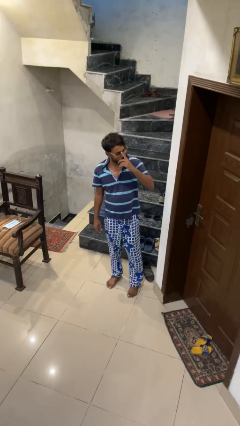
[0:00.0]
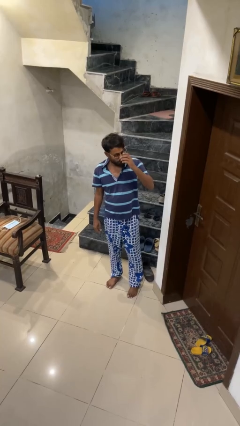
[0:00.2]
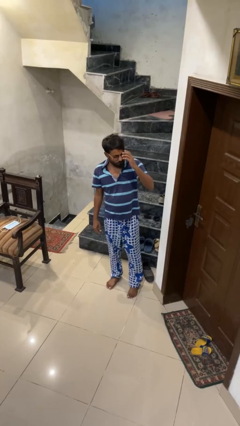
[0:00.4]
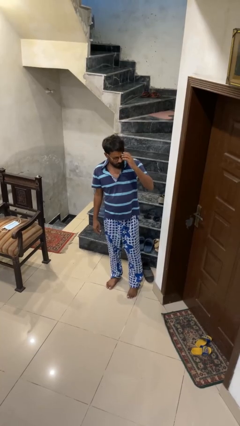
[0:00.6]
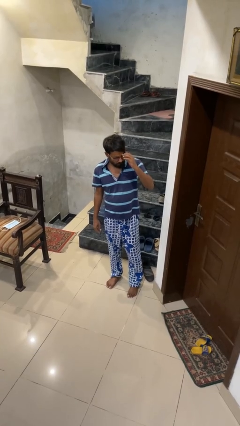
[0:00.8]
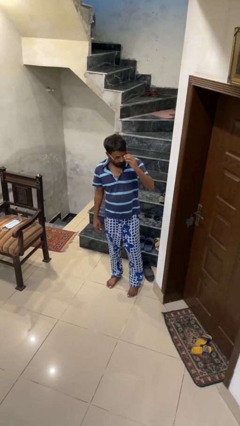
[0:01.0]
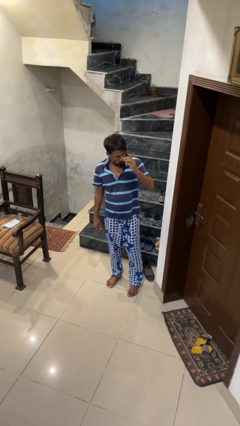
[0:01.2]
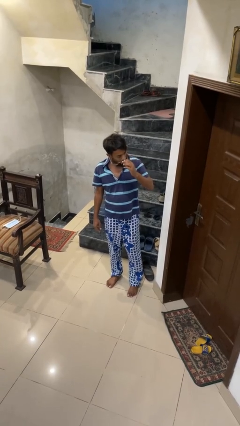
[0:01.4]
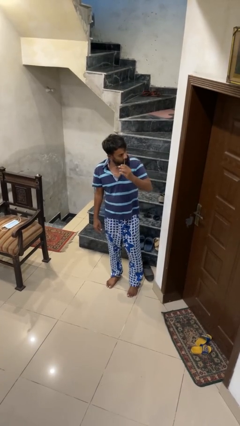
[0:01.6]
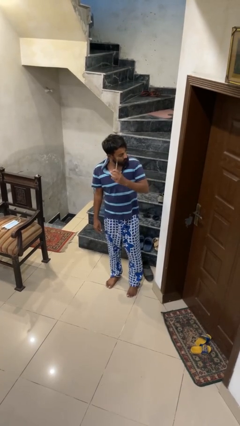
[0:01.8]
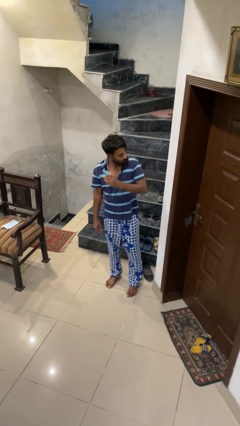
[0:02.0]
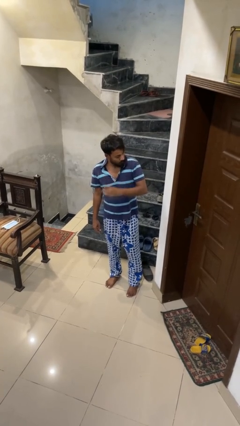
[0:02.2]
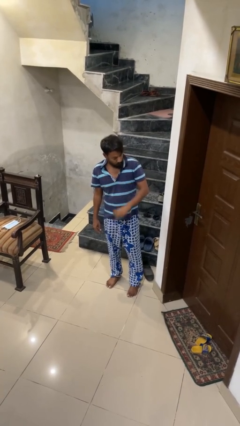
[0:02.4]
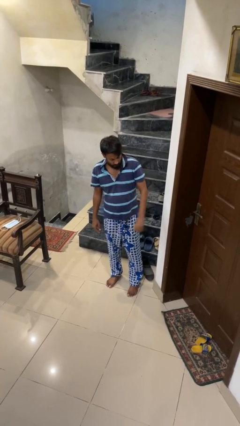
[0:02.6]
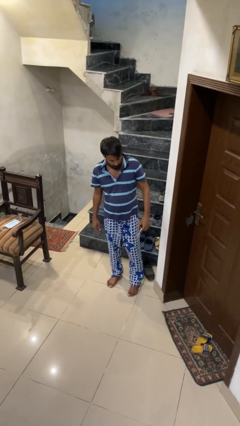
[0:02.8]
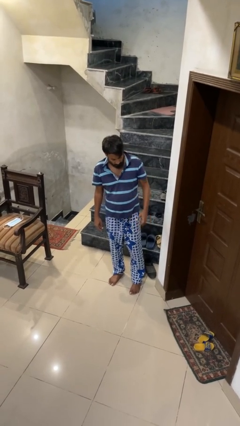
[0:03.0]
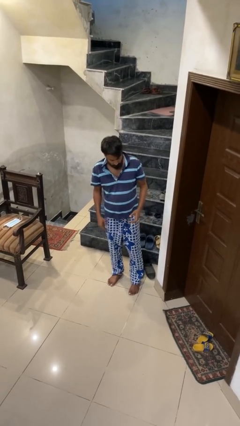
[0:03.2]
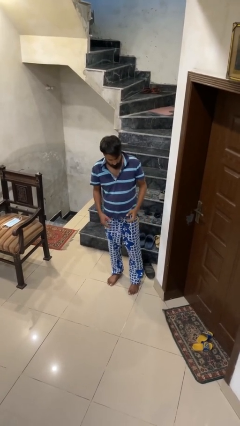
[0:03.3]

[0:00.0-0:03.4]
person takes off glasses

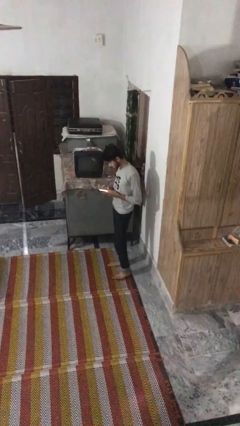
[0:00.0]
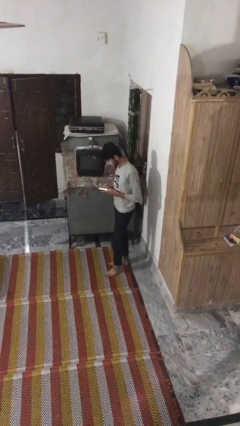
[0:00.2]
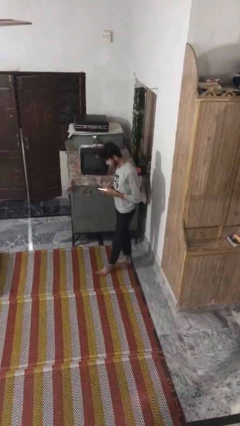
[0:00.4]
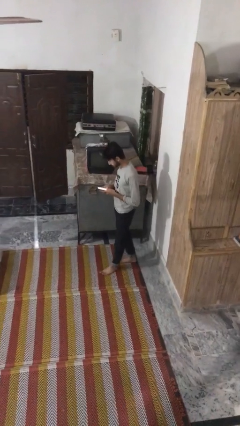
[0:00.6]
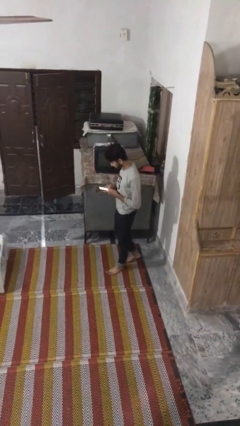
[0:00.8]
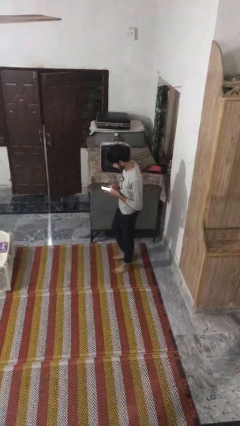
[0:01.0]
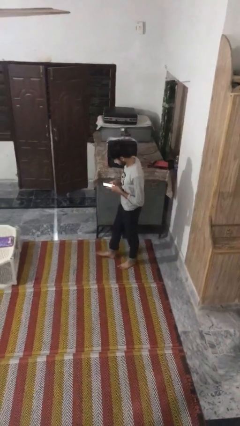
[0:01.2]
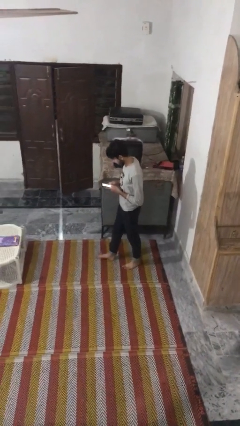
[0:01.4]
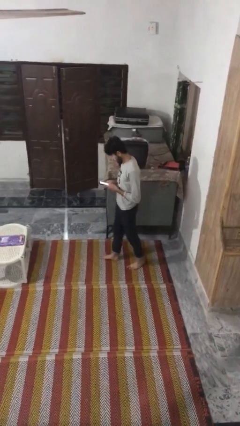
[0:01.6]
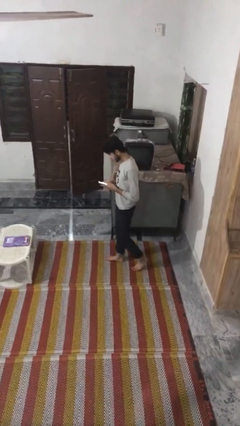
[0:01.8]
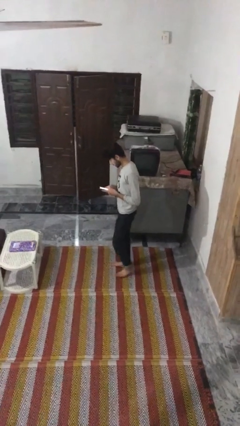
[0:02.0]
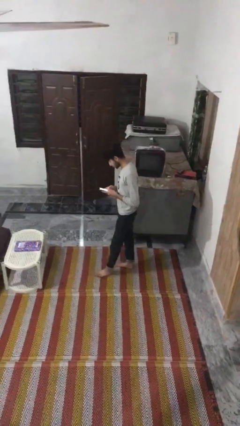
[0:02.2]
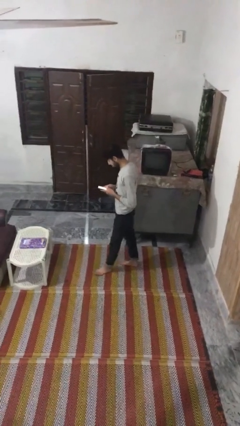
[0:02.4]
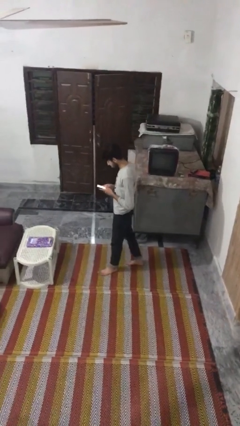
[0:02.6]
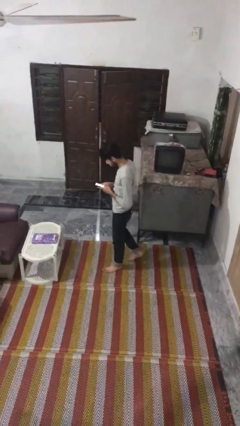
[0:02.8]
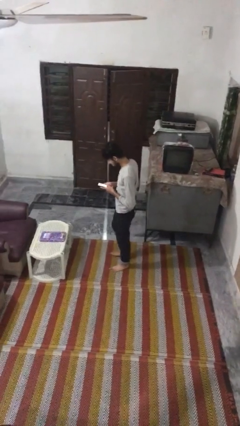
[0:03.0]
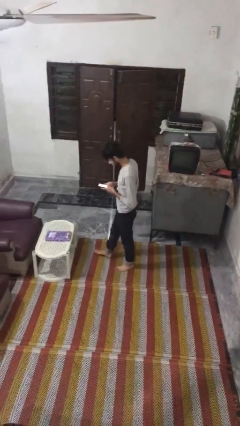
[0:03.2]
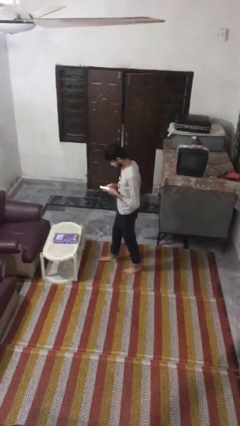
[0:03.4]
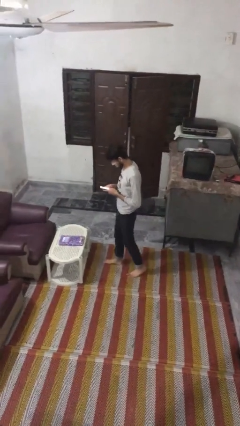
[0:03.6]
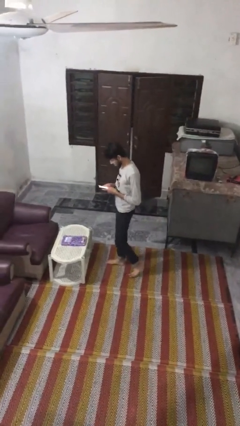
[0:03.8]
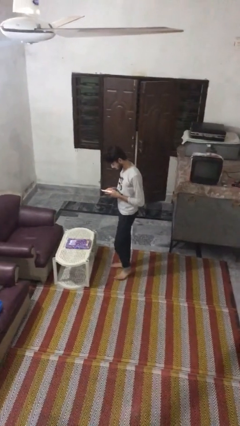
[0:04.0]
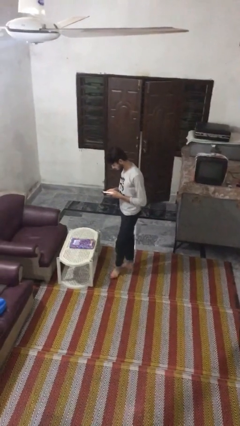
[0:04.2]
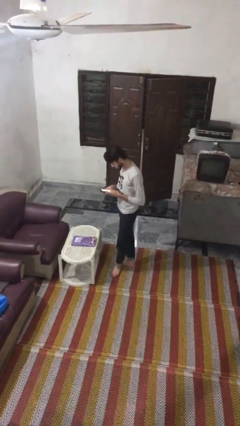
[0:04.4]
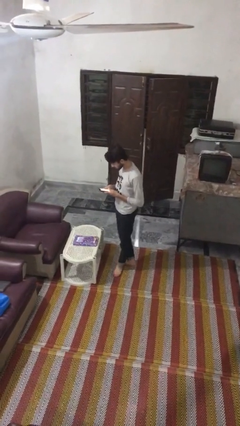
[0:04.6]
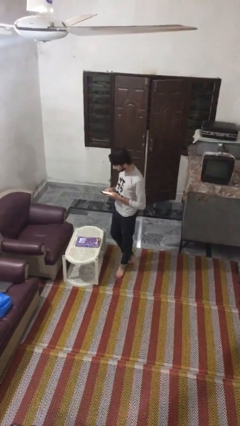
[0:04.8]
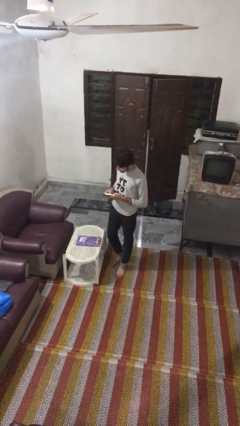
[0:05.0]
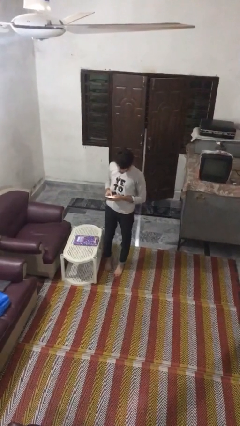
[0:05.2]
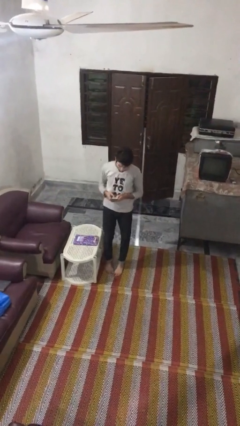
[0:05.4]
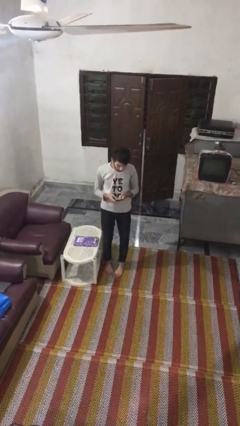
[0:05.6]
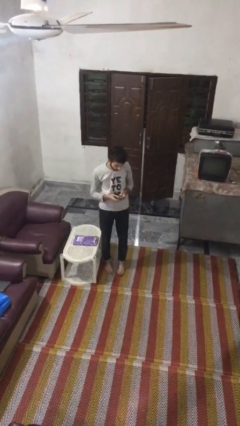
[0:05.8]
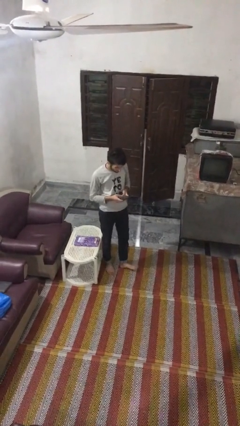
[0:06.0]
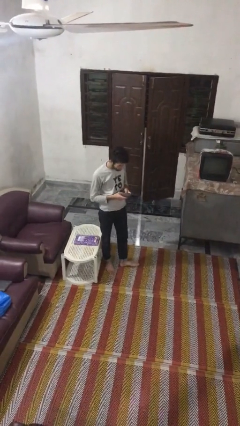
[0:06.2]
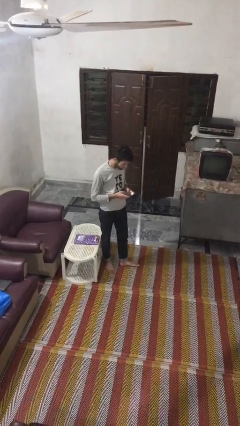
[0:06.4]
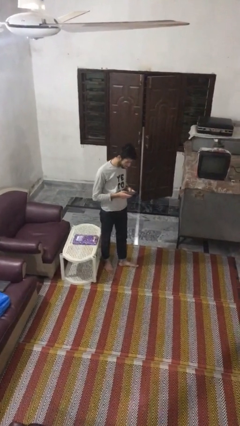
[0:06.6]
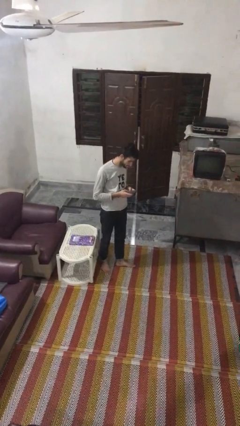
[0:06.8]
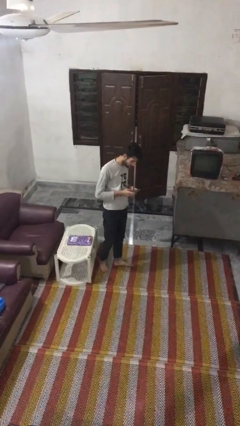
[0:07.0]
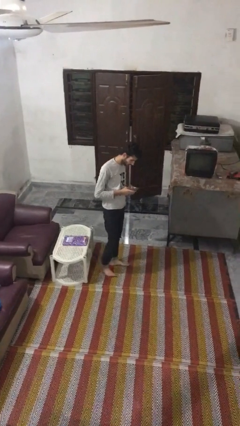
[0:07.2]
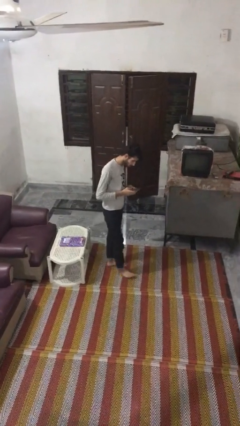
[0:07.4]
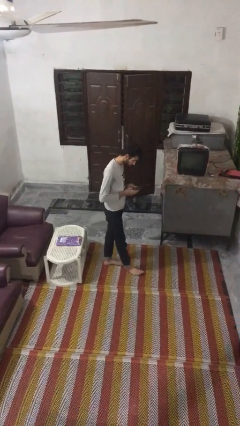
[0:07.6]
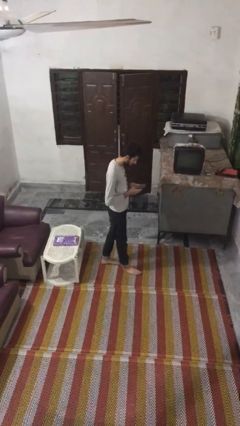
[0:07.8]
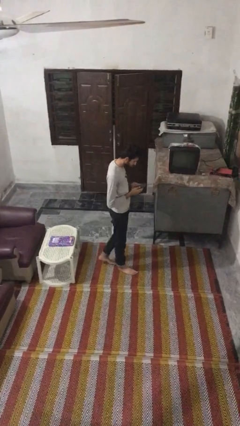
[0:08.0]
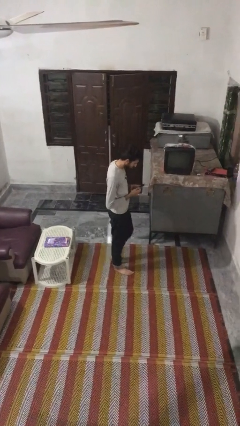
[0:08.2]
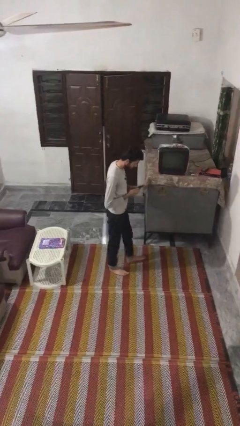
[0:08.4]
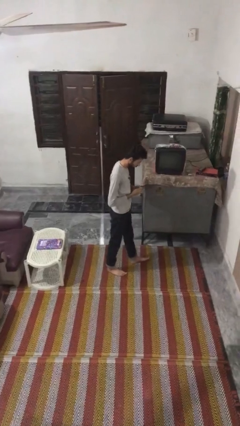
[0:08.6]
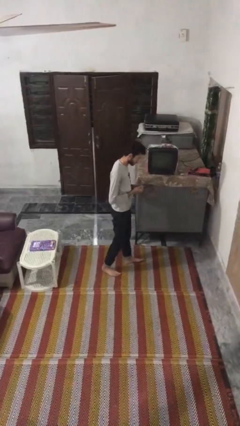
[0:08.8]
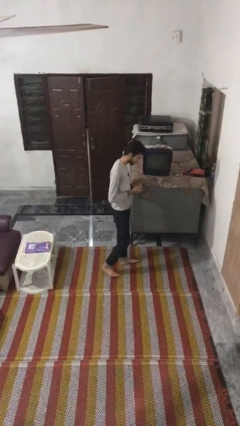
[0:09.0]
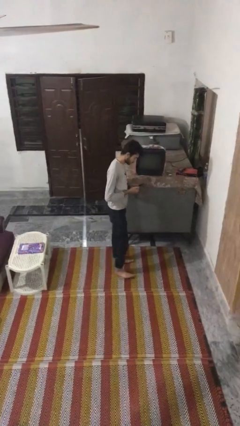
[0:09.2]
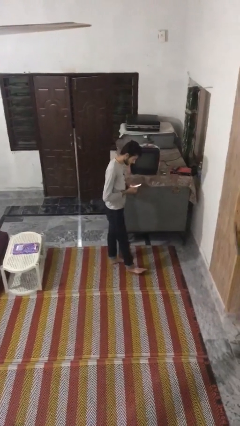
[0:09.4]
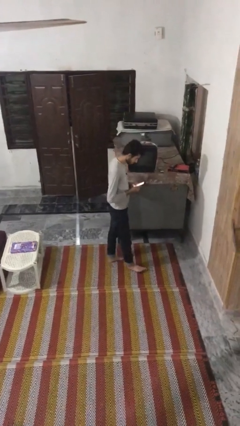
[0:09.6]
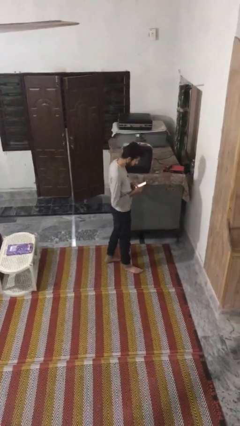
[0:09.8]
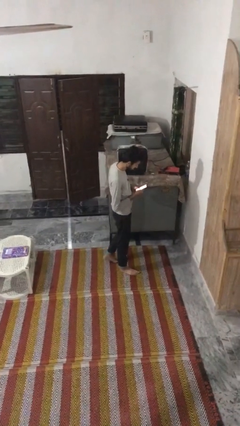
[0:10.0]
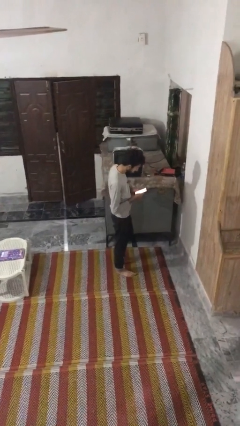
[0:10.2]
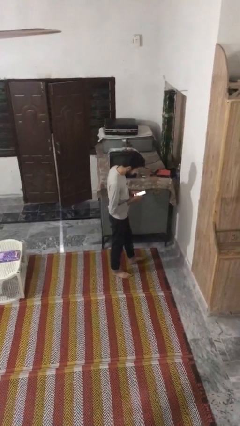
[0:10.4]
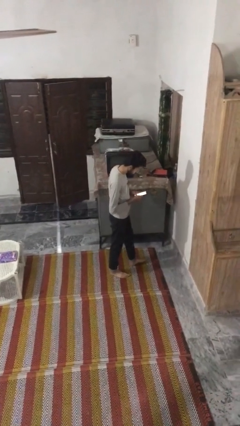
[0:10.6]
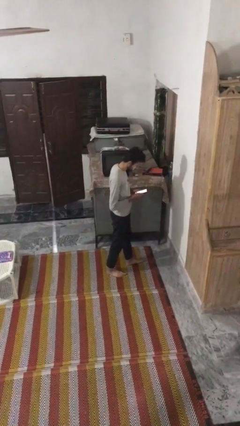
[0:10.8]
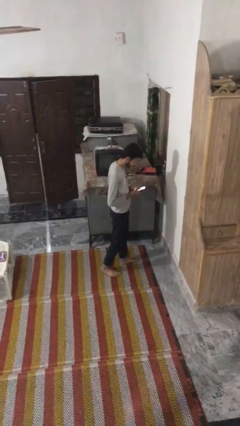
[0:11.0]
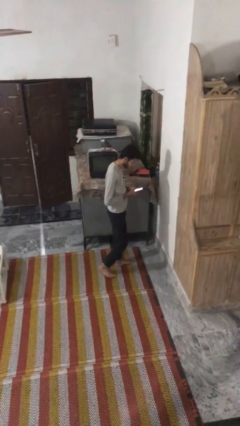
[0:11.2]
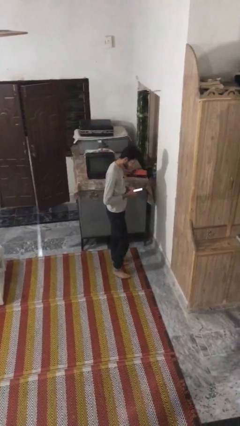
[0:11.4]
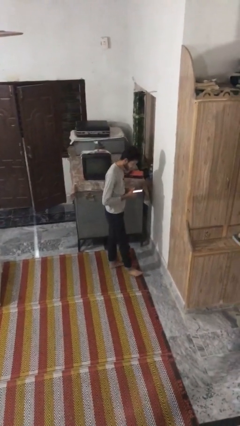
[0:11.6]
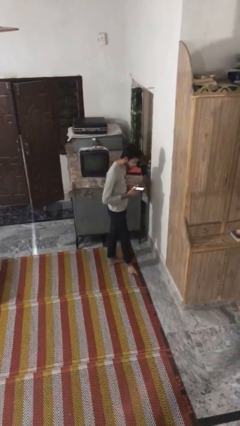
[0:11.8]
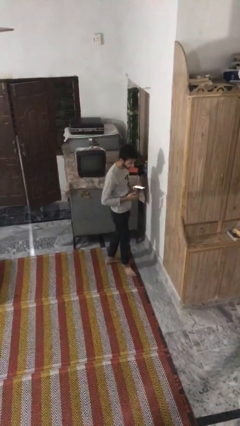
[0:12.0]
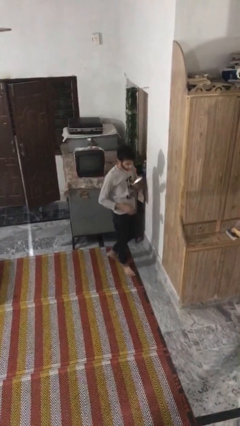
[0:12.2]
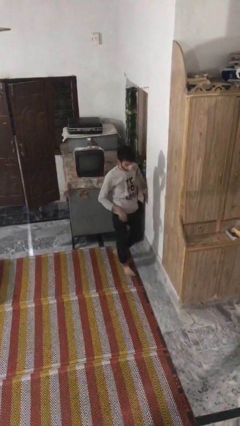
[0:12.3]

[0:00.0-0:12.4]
person texts on phone

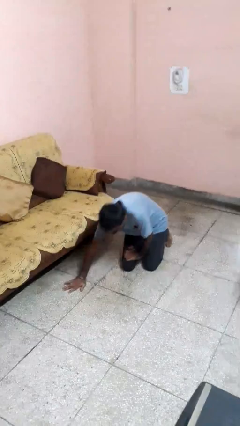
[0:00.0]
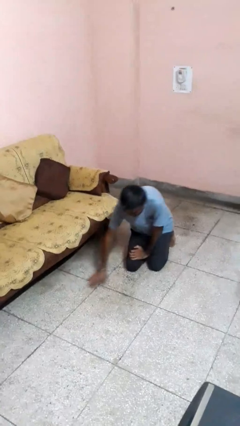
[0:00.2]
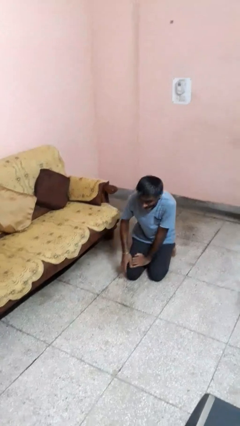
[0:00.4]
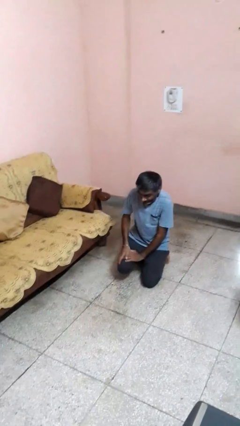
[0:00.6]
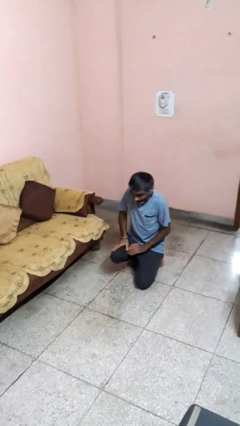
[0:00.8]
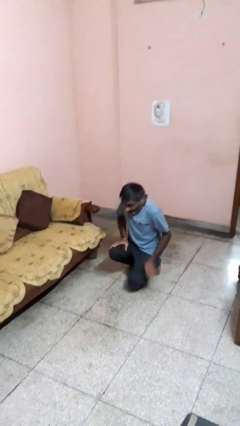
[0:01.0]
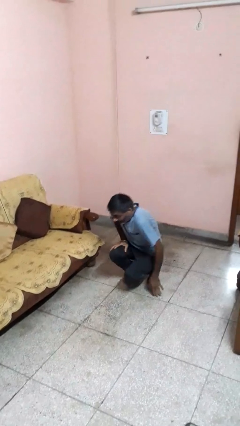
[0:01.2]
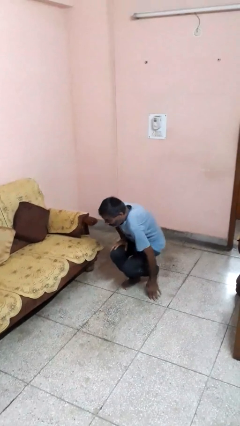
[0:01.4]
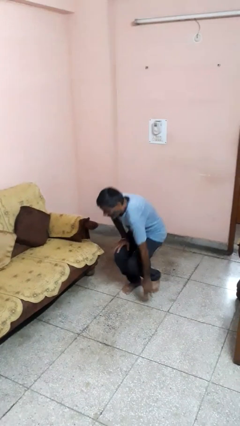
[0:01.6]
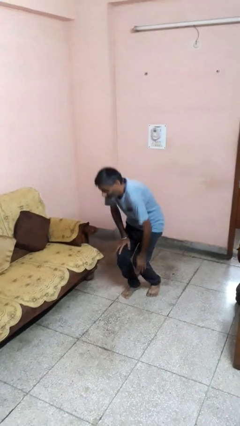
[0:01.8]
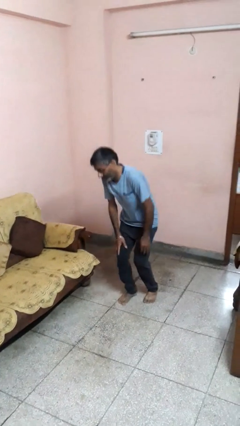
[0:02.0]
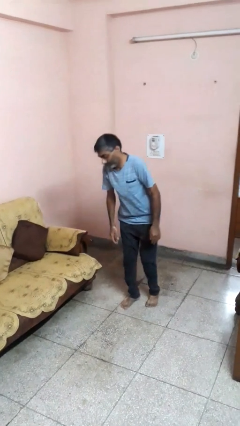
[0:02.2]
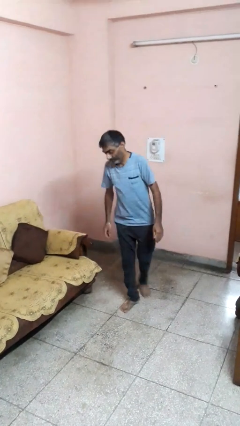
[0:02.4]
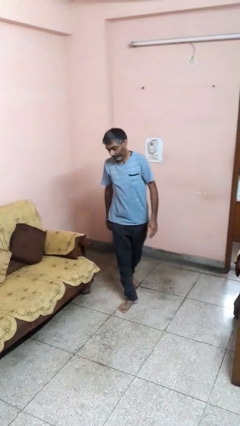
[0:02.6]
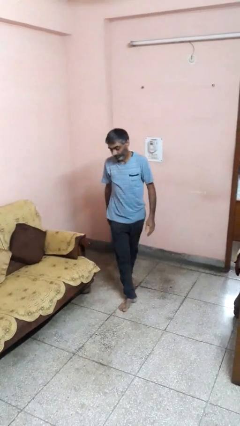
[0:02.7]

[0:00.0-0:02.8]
person stands up from floor
